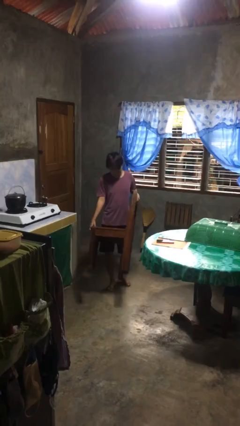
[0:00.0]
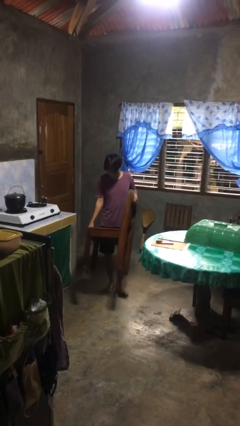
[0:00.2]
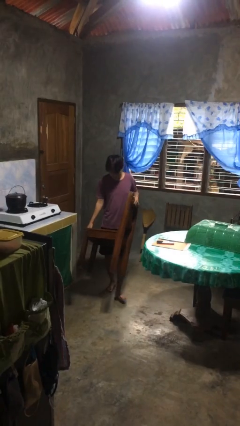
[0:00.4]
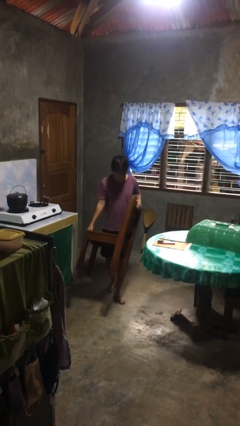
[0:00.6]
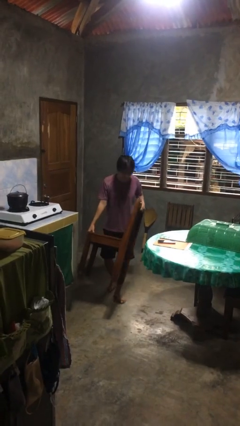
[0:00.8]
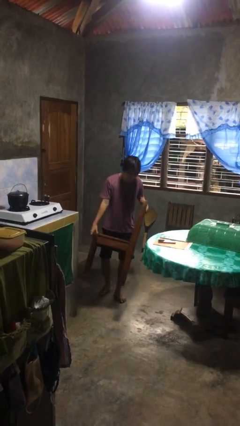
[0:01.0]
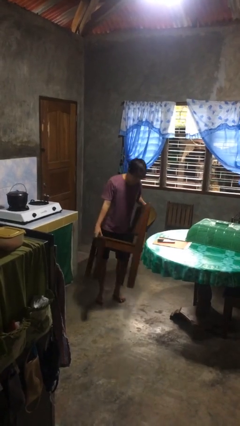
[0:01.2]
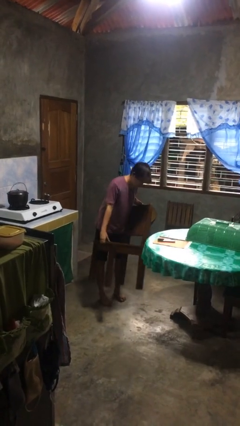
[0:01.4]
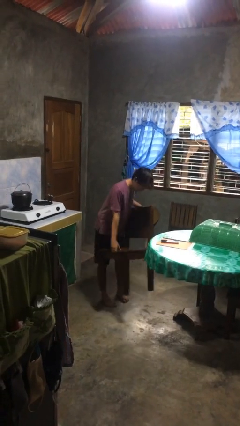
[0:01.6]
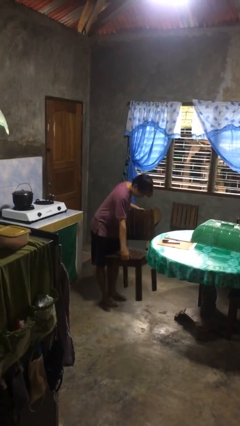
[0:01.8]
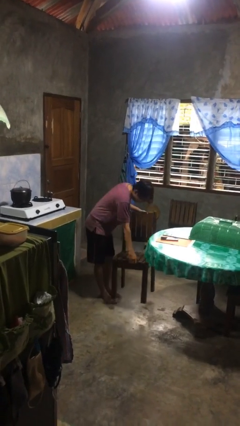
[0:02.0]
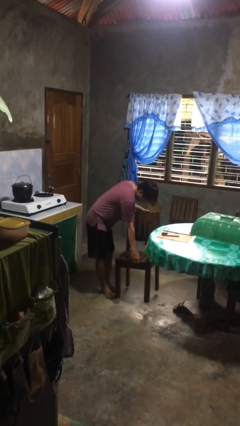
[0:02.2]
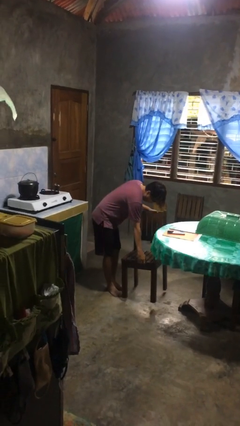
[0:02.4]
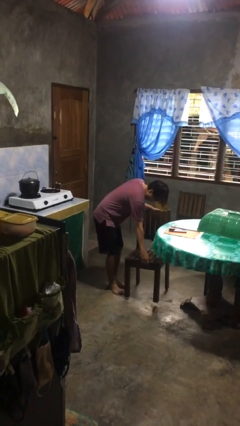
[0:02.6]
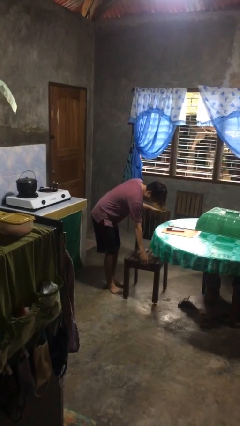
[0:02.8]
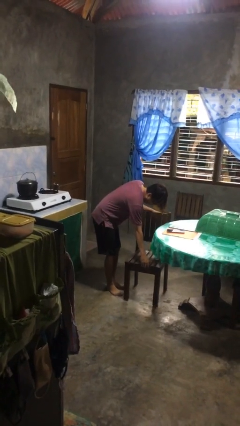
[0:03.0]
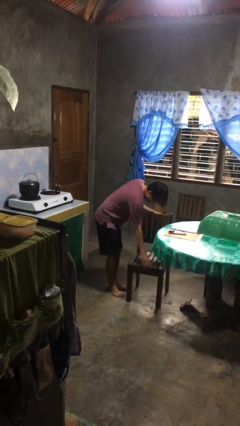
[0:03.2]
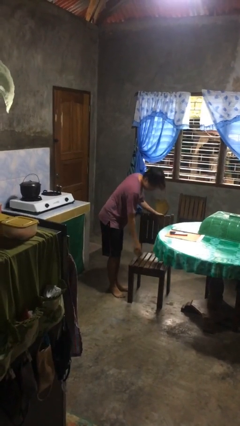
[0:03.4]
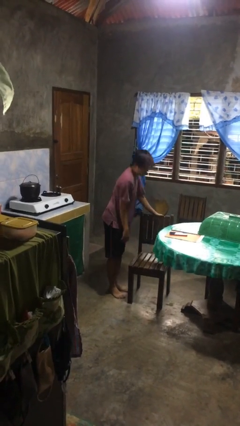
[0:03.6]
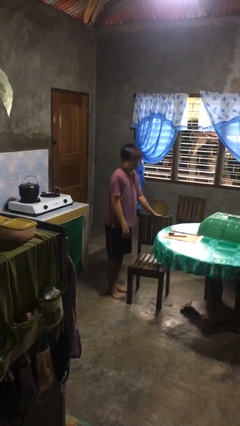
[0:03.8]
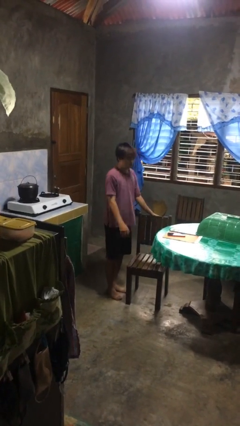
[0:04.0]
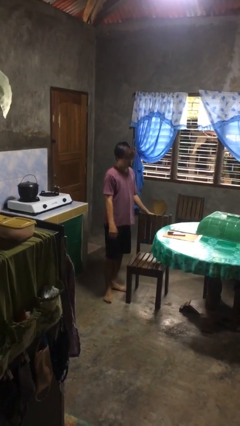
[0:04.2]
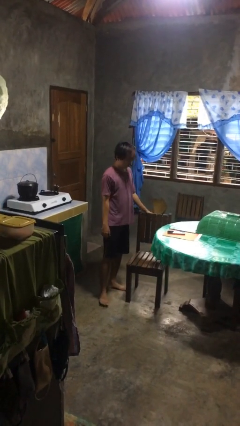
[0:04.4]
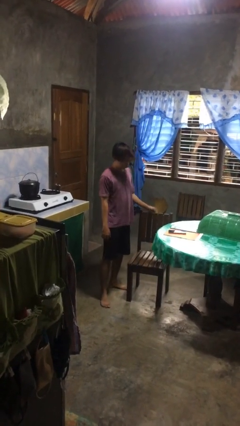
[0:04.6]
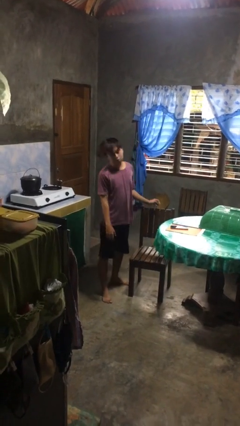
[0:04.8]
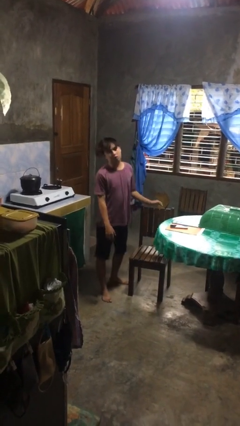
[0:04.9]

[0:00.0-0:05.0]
person puts down object on floor

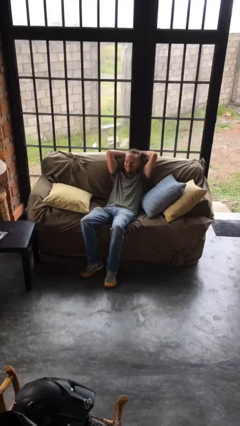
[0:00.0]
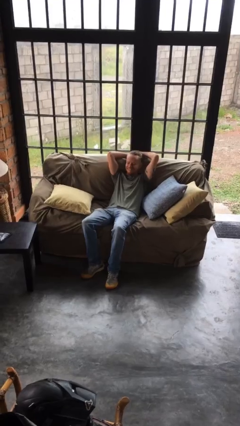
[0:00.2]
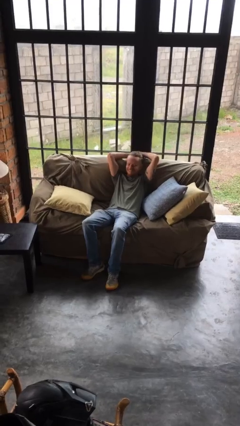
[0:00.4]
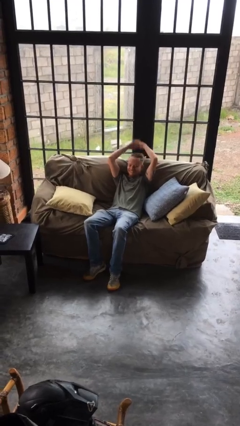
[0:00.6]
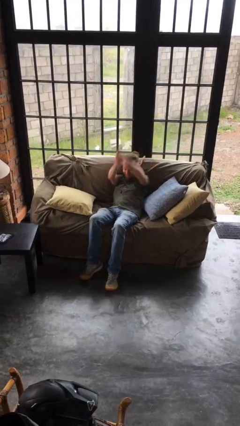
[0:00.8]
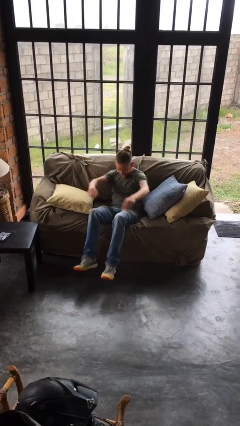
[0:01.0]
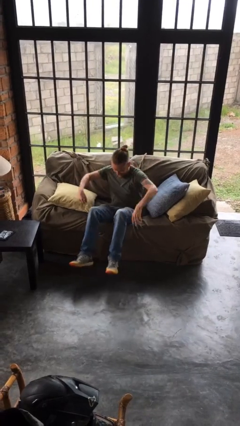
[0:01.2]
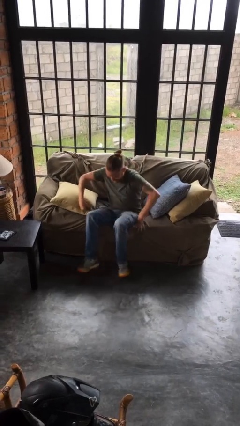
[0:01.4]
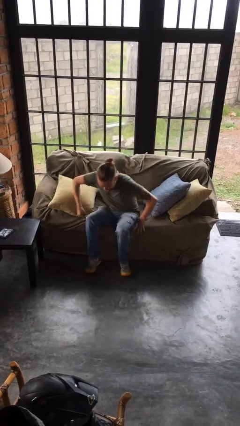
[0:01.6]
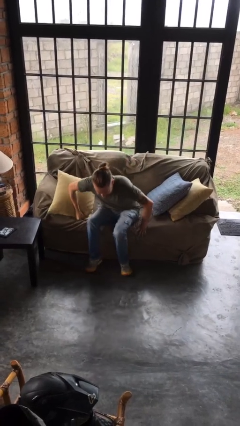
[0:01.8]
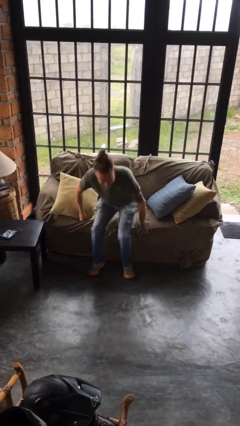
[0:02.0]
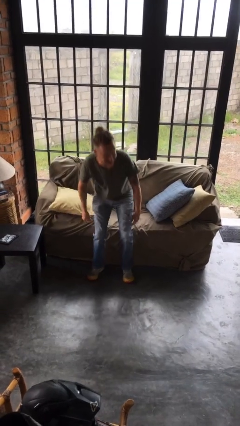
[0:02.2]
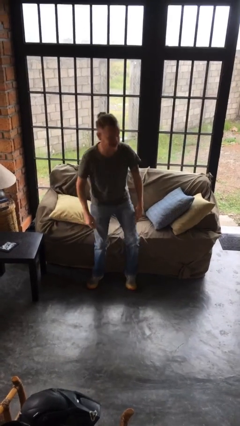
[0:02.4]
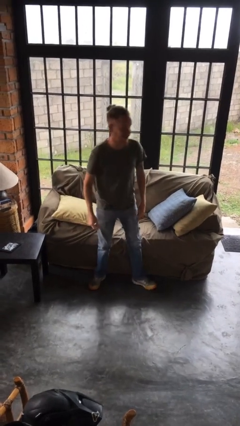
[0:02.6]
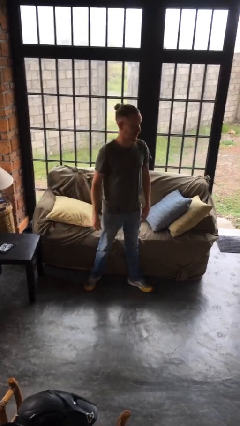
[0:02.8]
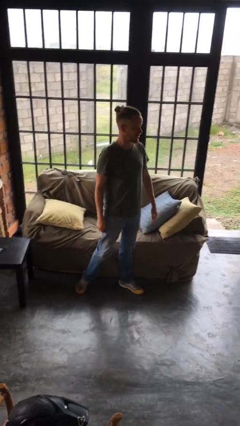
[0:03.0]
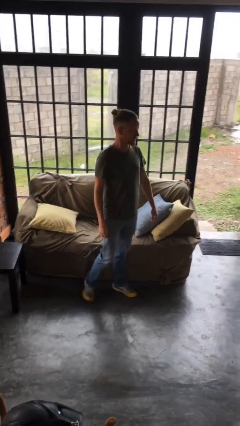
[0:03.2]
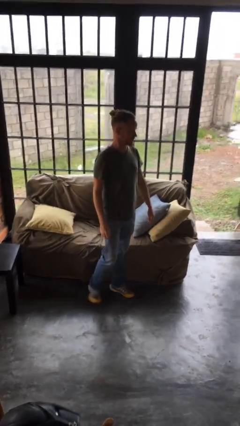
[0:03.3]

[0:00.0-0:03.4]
person stands up

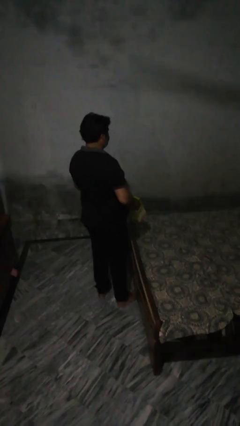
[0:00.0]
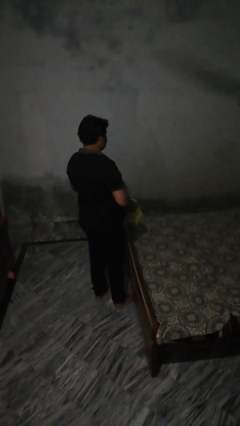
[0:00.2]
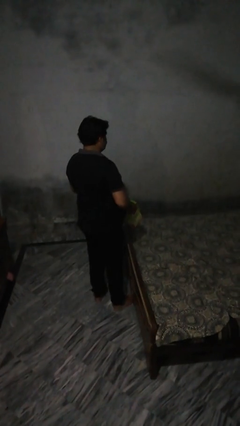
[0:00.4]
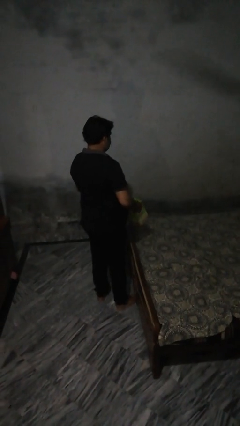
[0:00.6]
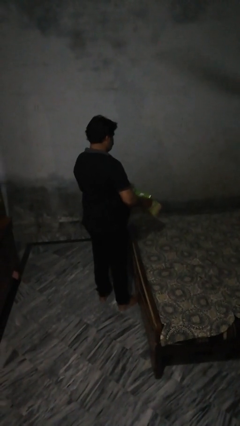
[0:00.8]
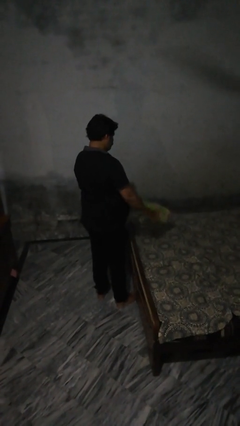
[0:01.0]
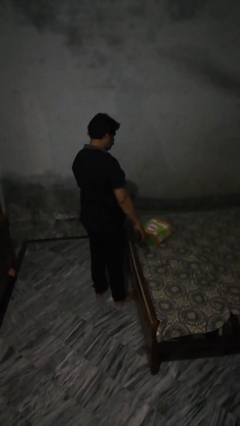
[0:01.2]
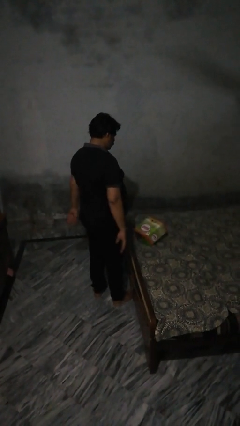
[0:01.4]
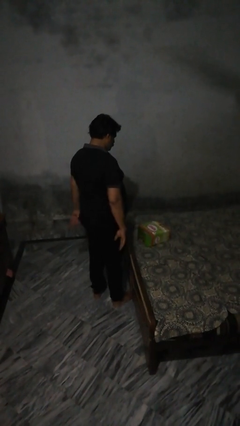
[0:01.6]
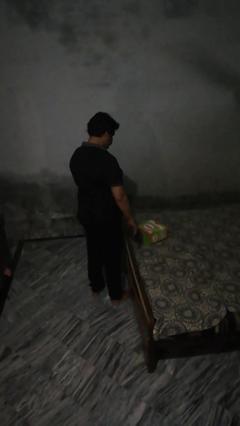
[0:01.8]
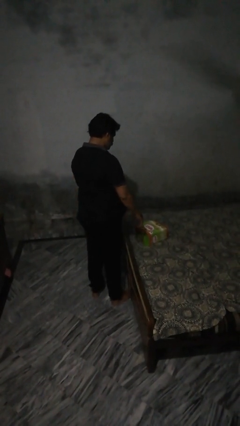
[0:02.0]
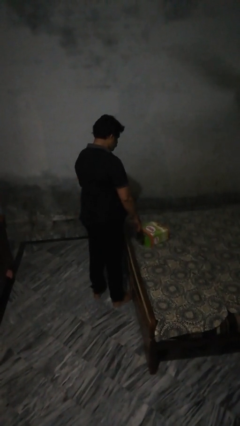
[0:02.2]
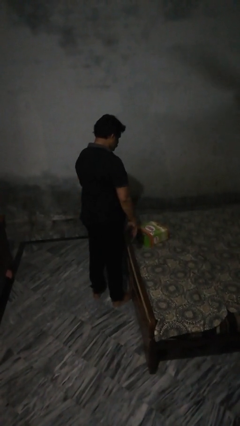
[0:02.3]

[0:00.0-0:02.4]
person throws object on bed

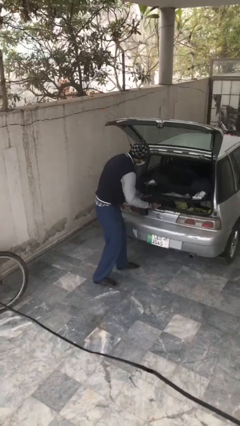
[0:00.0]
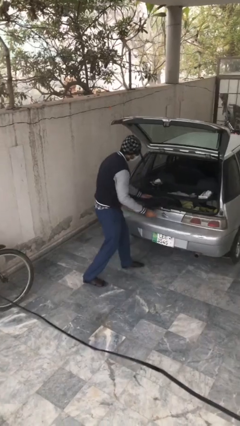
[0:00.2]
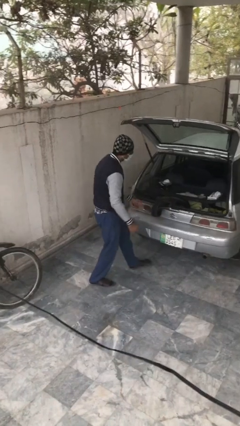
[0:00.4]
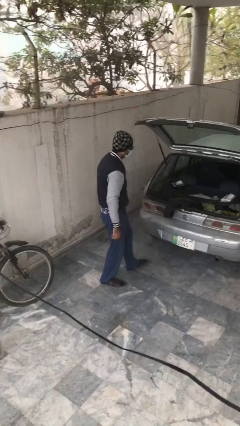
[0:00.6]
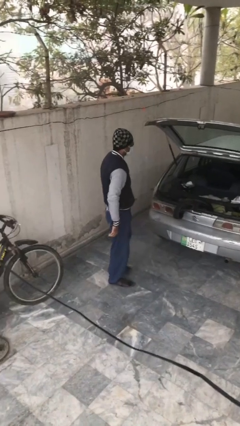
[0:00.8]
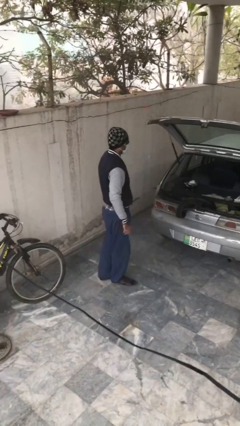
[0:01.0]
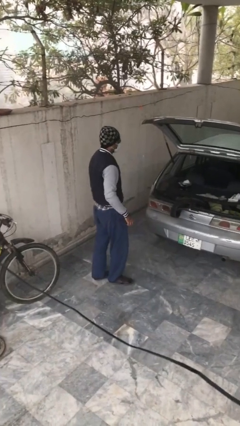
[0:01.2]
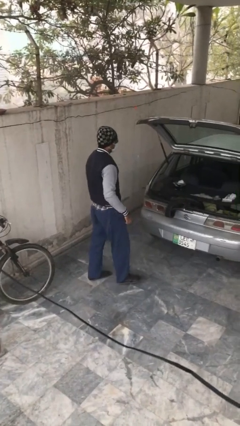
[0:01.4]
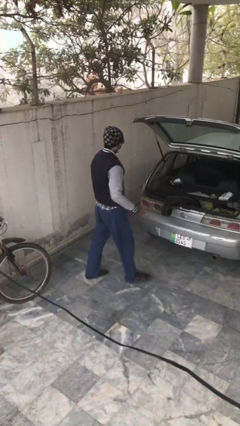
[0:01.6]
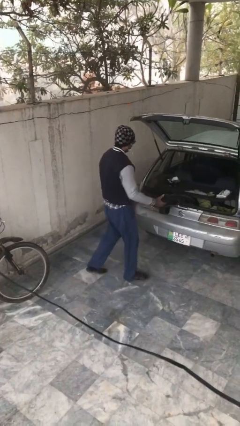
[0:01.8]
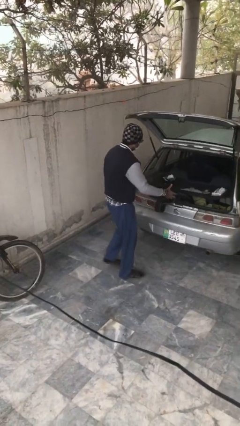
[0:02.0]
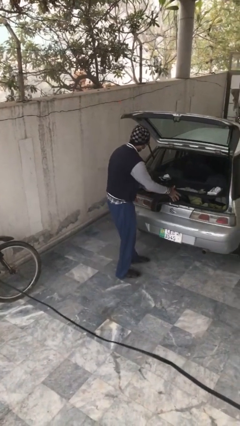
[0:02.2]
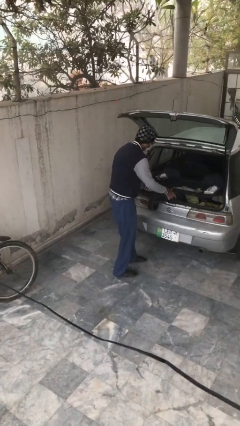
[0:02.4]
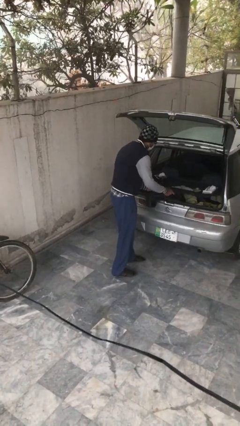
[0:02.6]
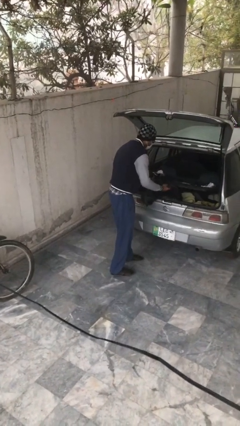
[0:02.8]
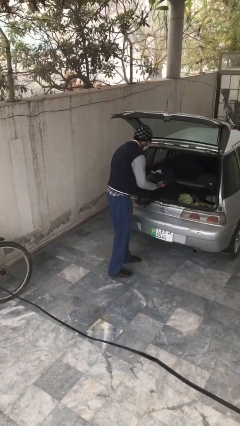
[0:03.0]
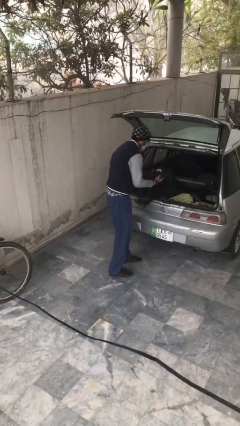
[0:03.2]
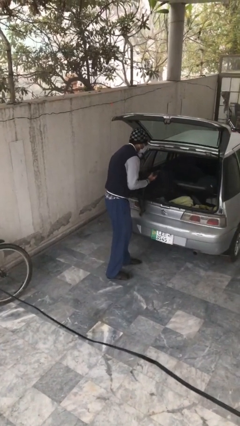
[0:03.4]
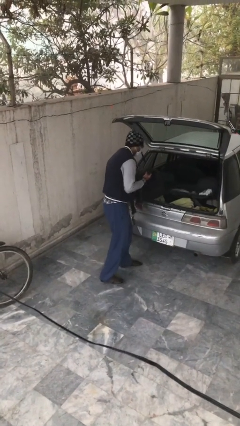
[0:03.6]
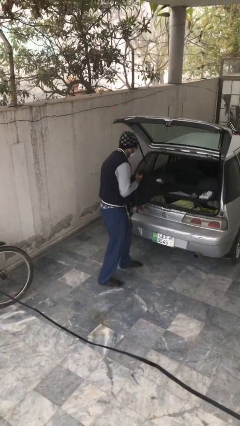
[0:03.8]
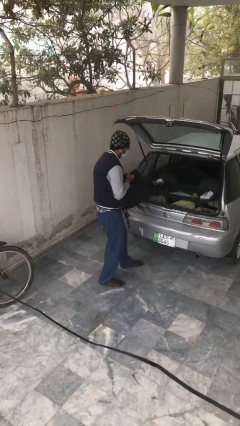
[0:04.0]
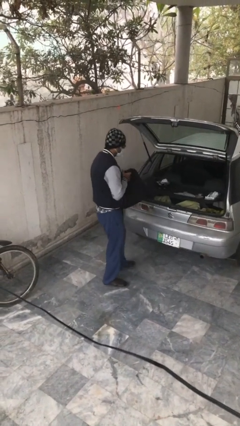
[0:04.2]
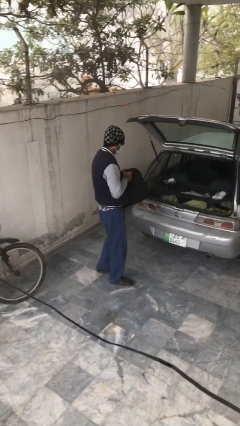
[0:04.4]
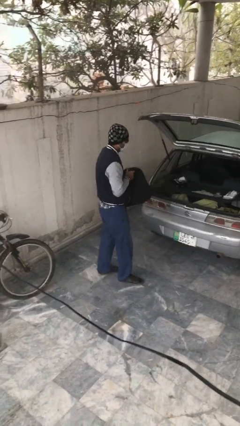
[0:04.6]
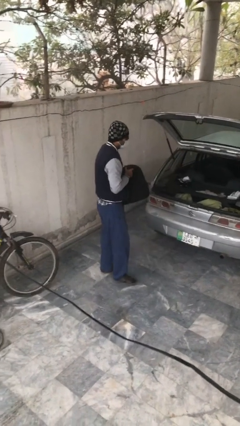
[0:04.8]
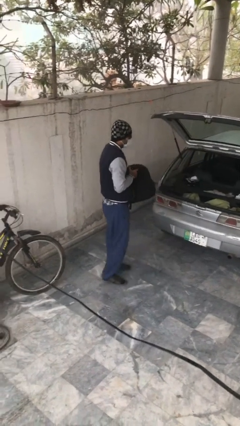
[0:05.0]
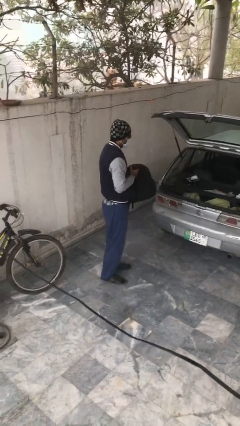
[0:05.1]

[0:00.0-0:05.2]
person unloads car

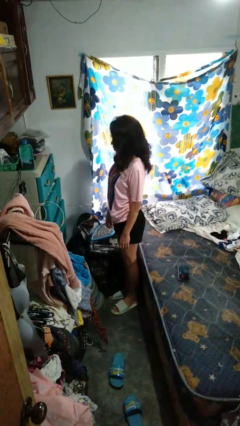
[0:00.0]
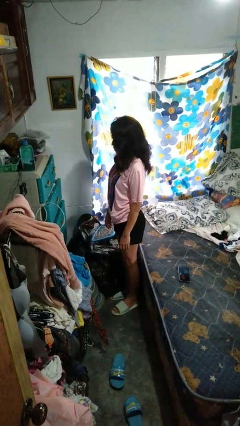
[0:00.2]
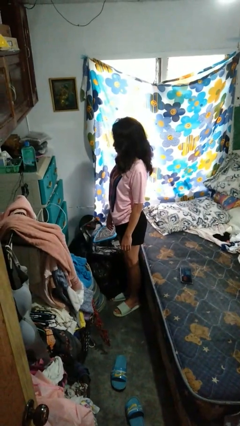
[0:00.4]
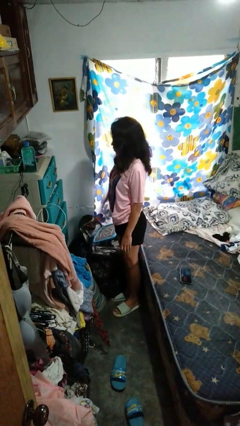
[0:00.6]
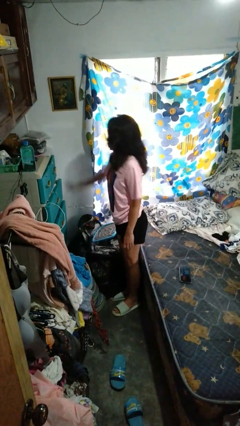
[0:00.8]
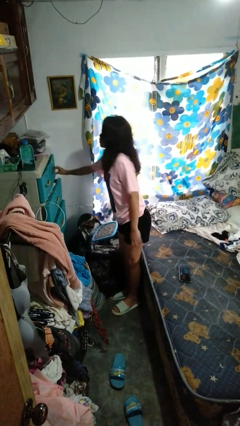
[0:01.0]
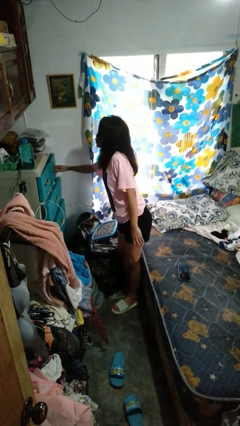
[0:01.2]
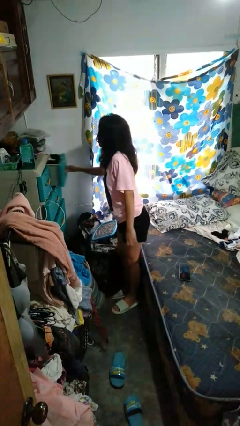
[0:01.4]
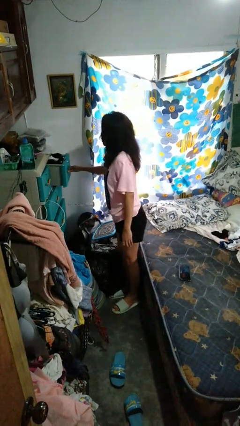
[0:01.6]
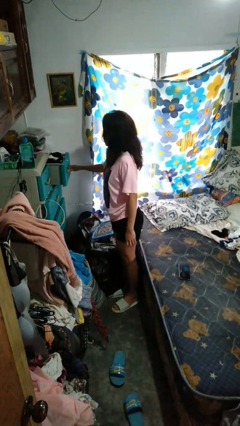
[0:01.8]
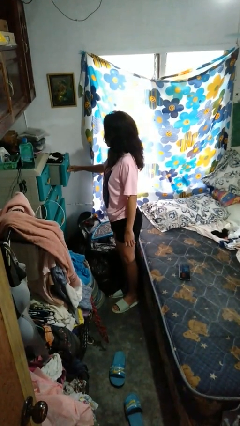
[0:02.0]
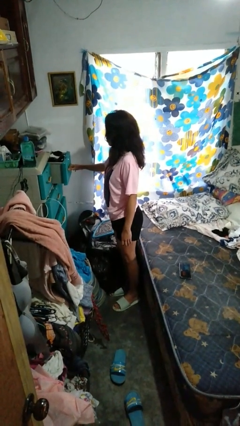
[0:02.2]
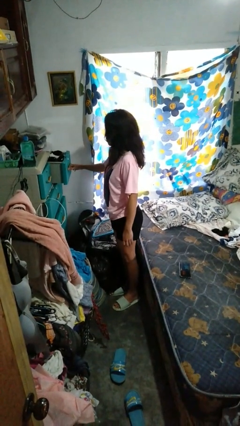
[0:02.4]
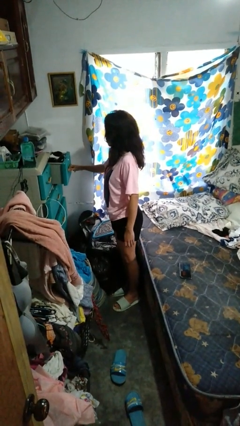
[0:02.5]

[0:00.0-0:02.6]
person opens dresser drawer
